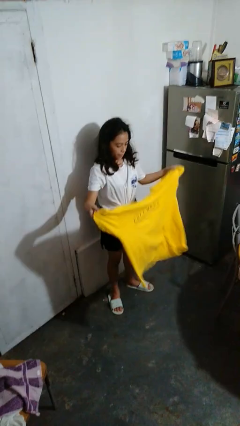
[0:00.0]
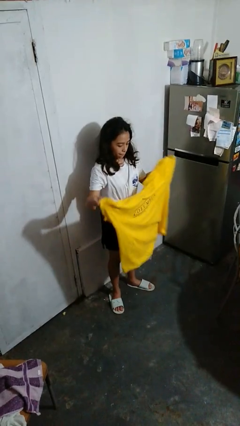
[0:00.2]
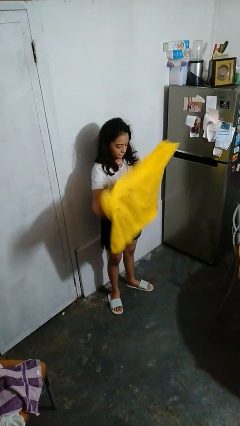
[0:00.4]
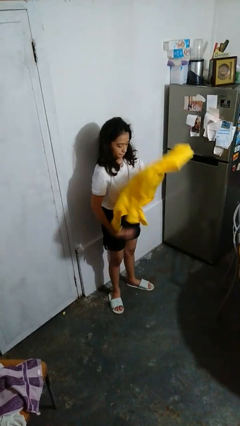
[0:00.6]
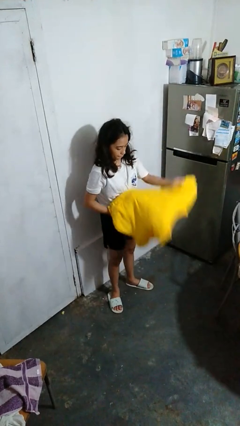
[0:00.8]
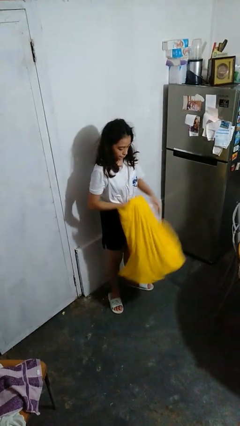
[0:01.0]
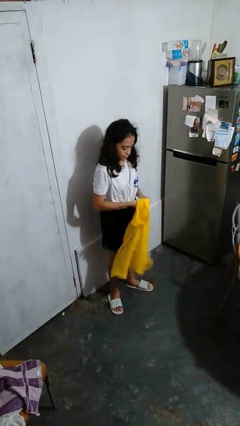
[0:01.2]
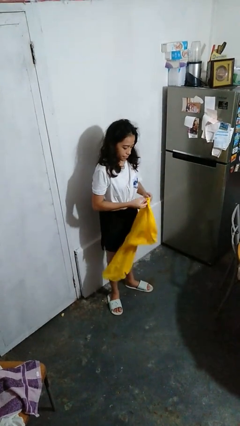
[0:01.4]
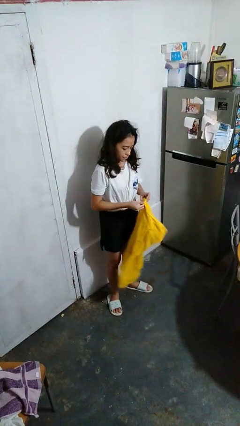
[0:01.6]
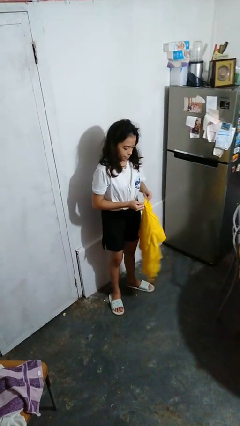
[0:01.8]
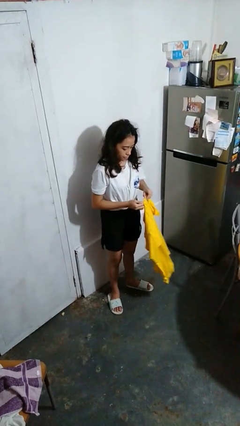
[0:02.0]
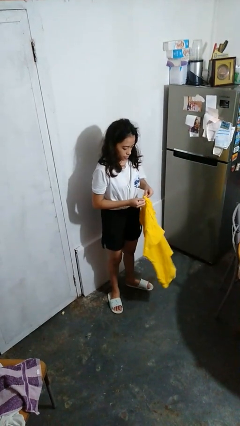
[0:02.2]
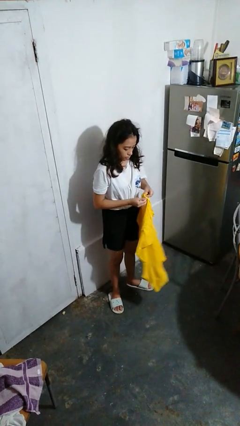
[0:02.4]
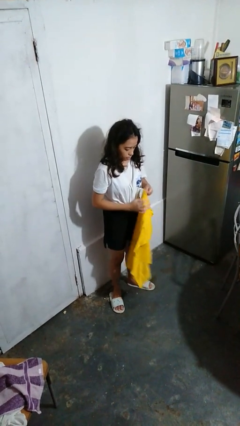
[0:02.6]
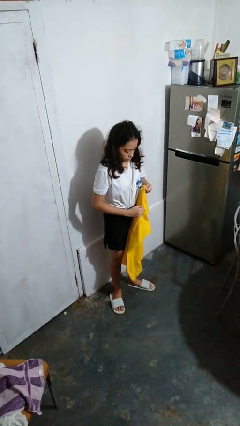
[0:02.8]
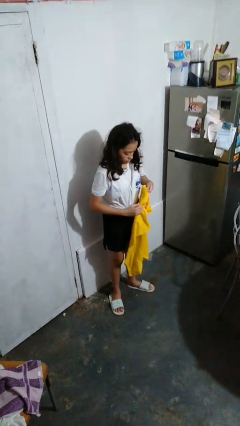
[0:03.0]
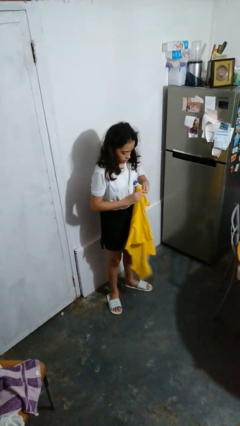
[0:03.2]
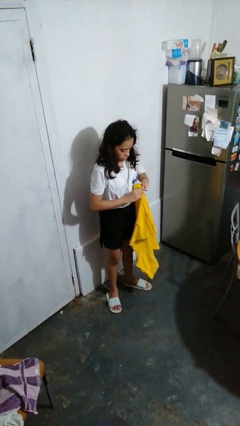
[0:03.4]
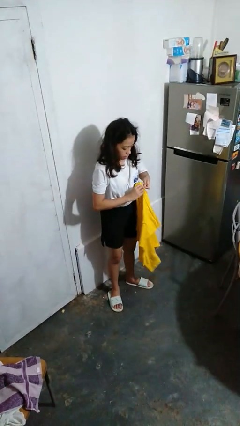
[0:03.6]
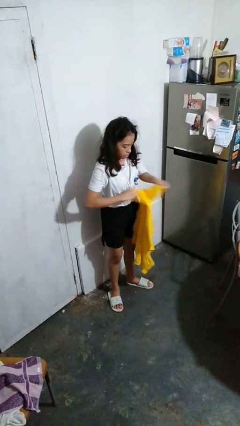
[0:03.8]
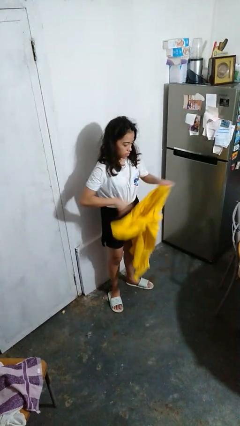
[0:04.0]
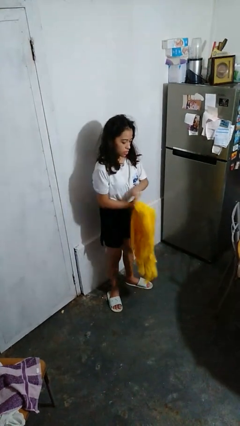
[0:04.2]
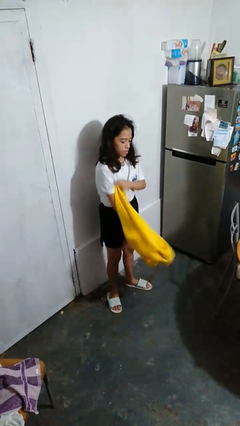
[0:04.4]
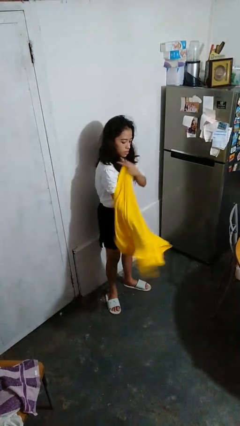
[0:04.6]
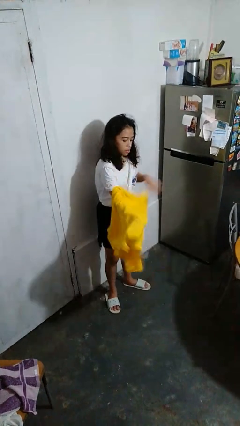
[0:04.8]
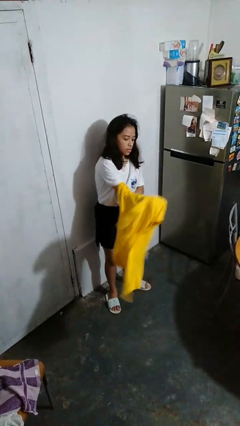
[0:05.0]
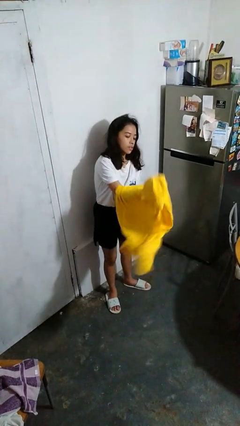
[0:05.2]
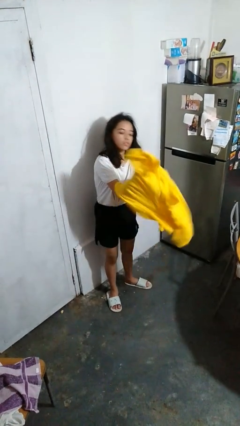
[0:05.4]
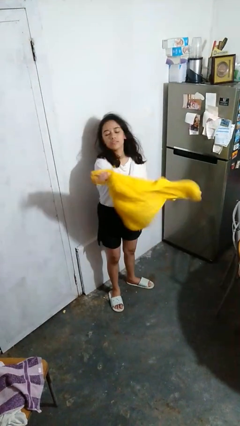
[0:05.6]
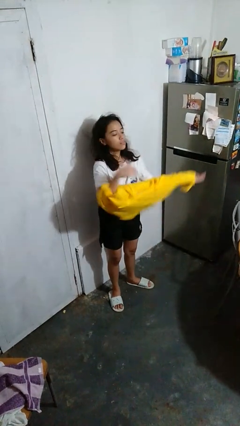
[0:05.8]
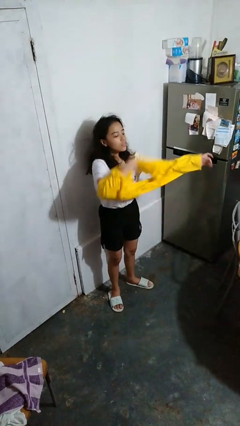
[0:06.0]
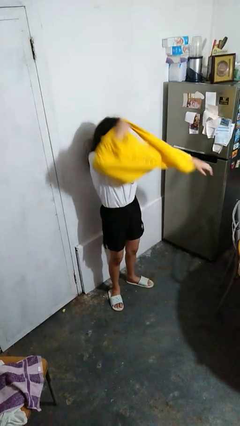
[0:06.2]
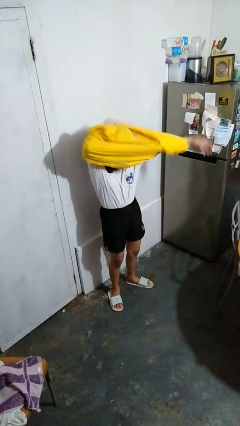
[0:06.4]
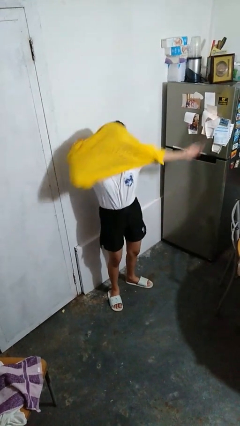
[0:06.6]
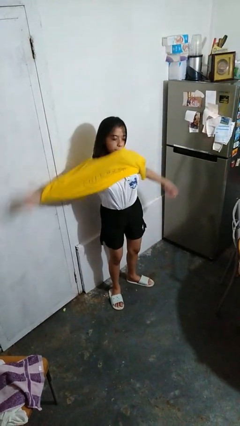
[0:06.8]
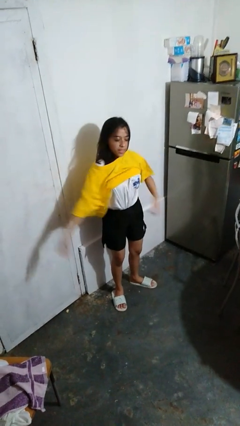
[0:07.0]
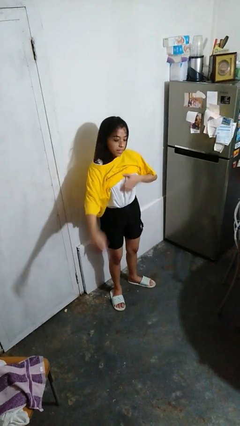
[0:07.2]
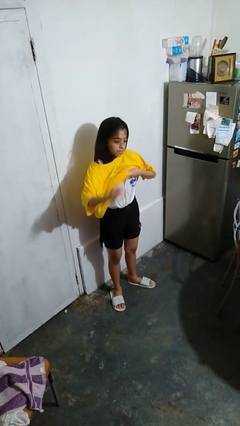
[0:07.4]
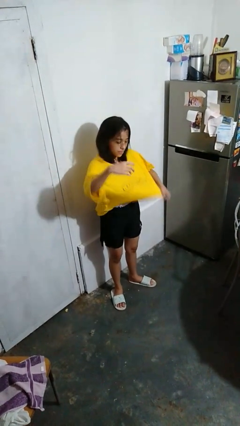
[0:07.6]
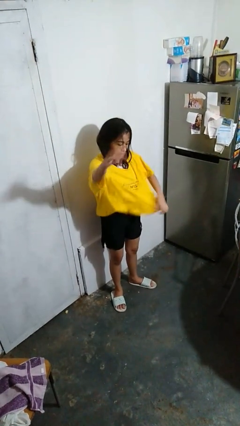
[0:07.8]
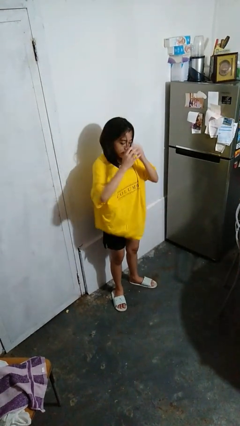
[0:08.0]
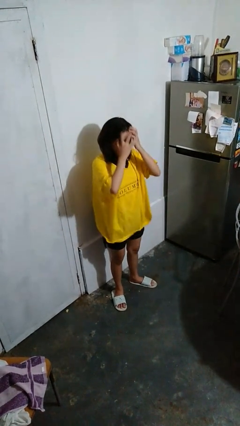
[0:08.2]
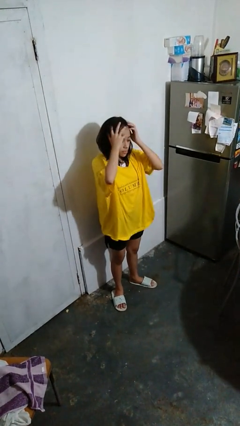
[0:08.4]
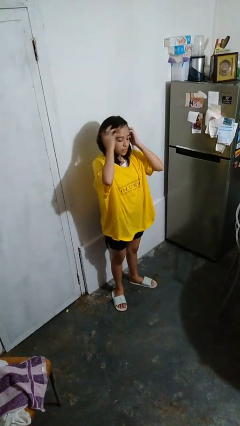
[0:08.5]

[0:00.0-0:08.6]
person puts on shirt

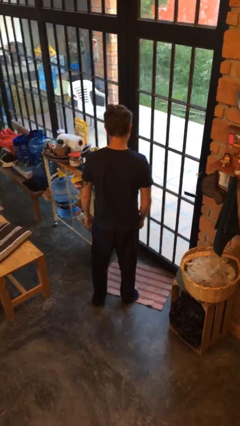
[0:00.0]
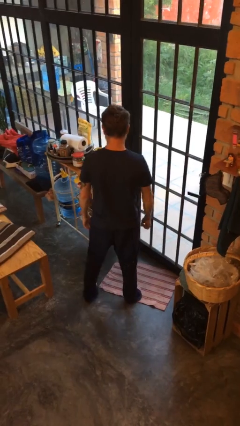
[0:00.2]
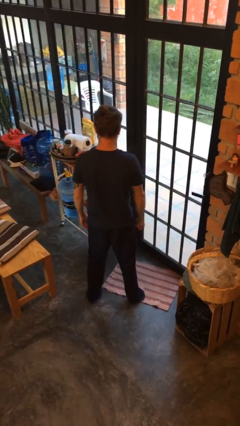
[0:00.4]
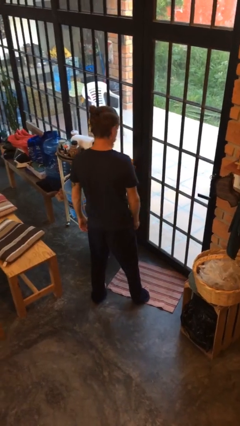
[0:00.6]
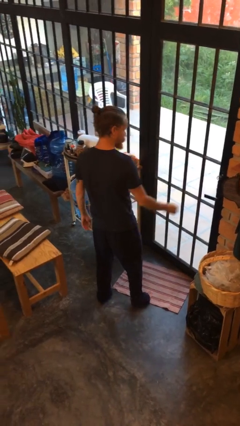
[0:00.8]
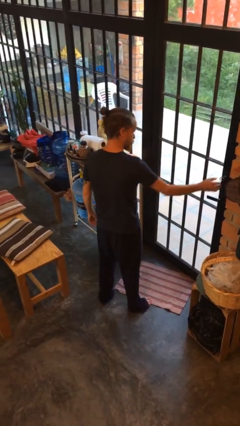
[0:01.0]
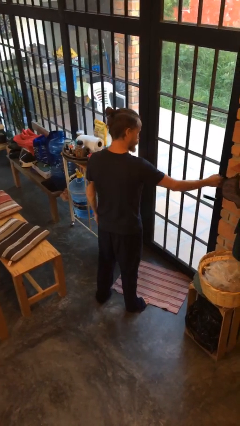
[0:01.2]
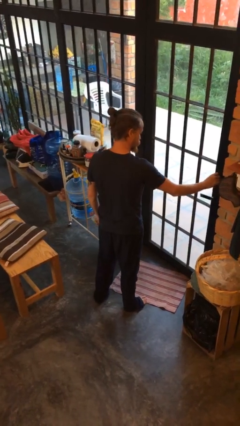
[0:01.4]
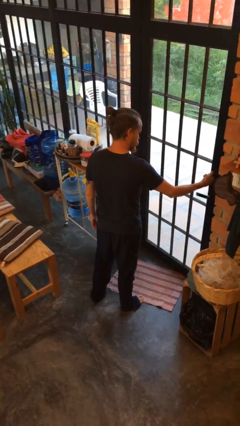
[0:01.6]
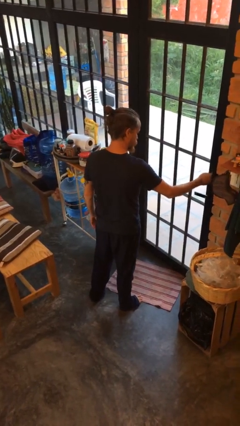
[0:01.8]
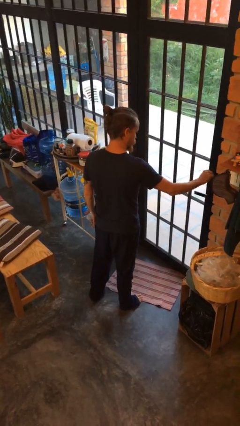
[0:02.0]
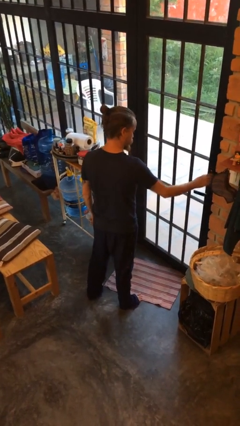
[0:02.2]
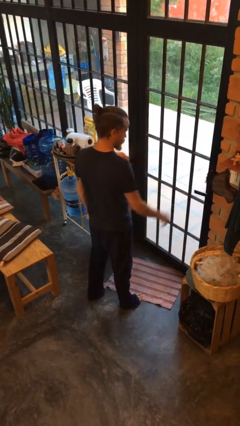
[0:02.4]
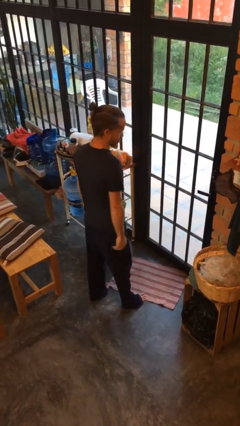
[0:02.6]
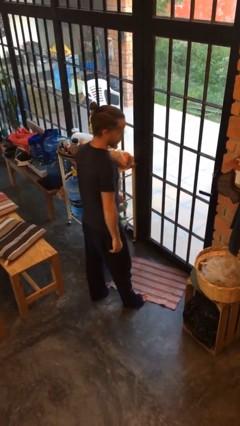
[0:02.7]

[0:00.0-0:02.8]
person unlocks door with keys

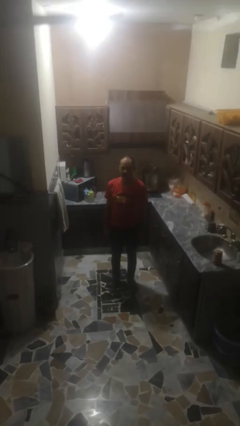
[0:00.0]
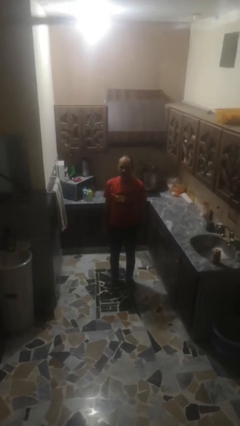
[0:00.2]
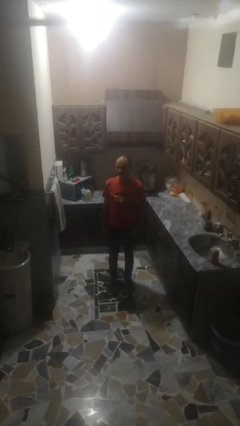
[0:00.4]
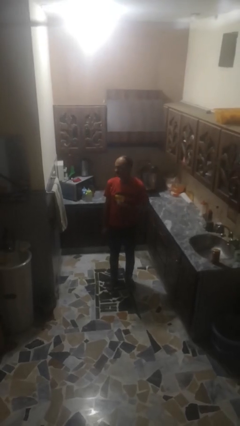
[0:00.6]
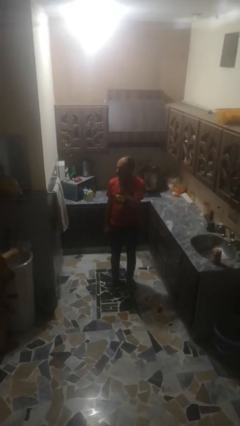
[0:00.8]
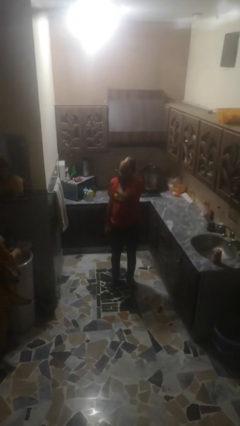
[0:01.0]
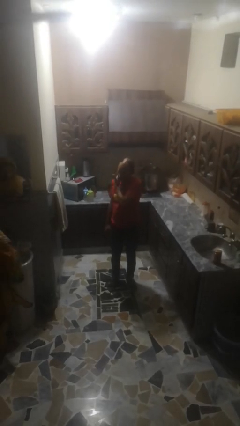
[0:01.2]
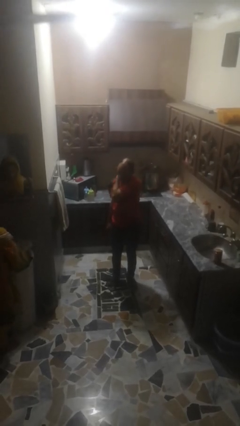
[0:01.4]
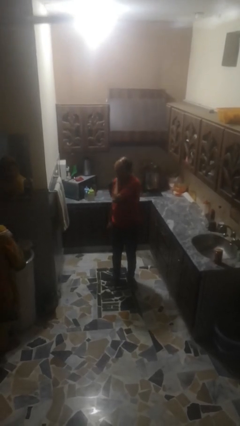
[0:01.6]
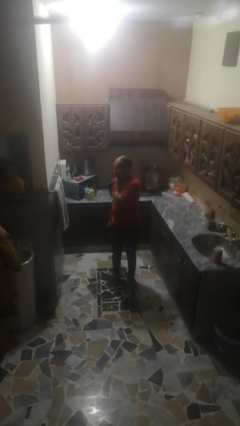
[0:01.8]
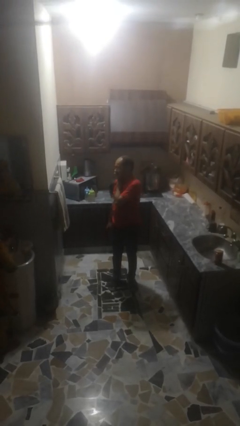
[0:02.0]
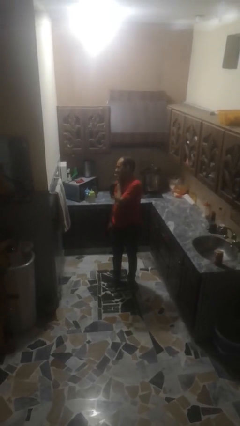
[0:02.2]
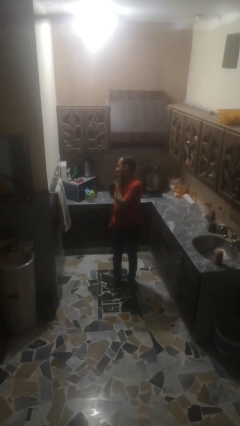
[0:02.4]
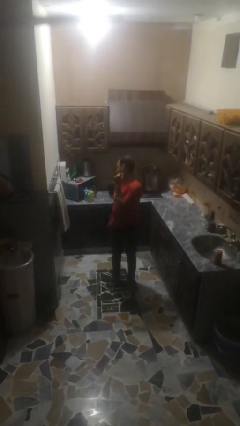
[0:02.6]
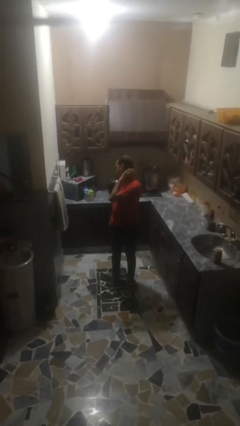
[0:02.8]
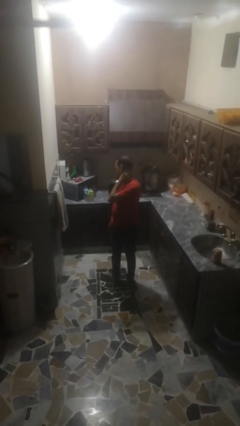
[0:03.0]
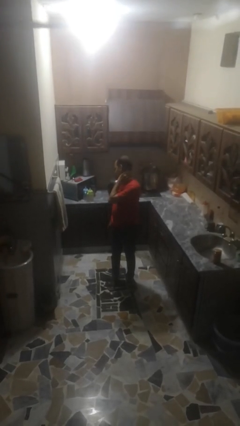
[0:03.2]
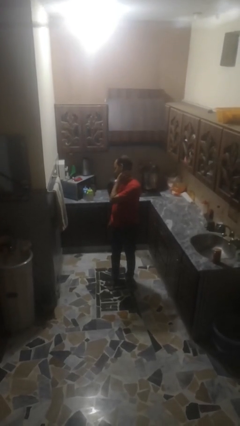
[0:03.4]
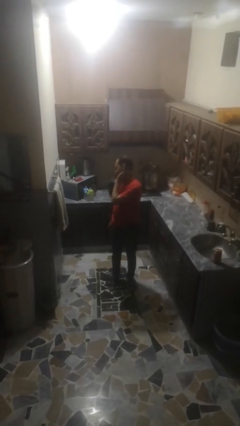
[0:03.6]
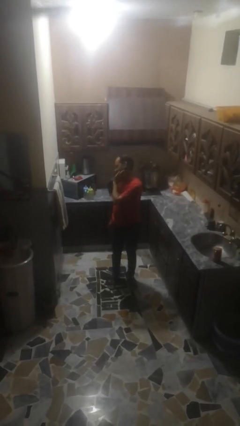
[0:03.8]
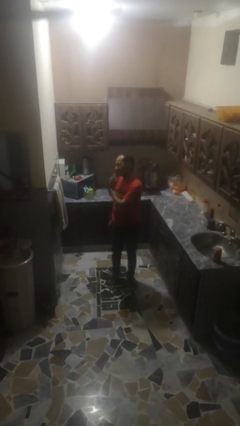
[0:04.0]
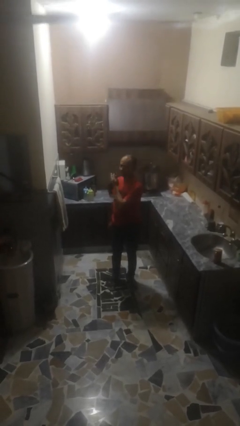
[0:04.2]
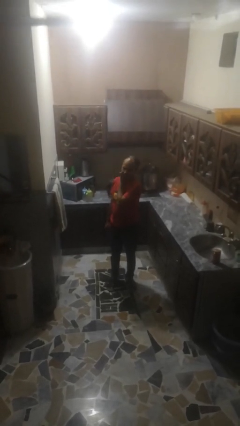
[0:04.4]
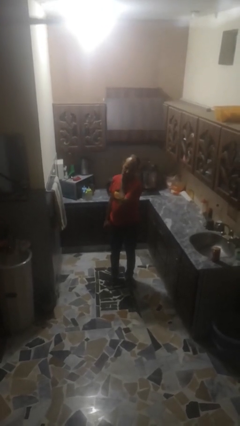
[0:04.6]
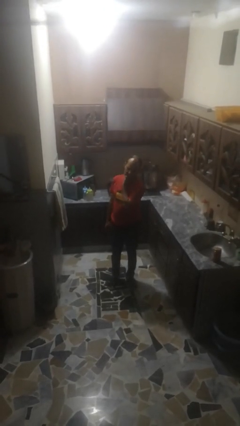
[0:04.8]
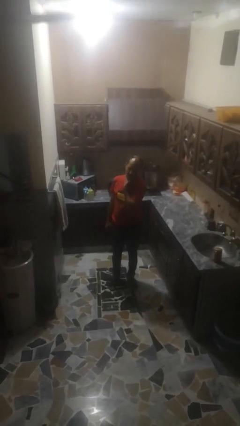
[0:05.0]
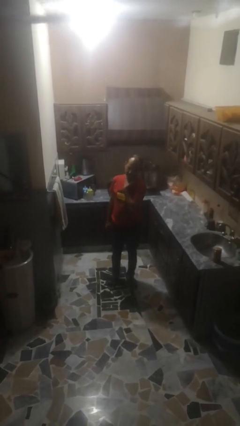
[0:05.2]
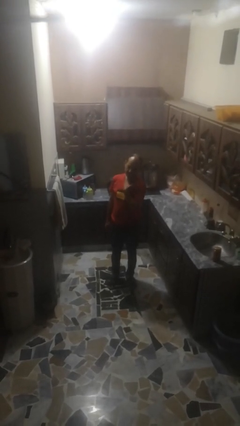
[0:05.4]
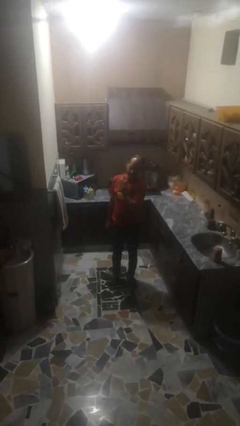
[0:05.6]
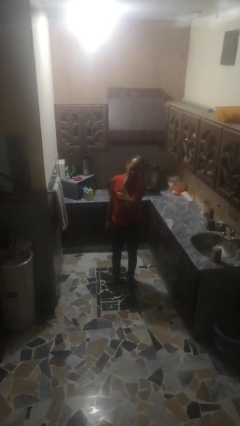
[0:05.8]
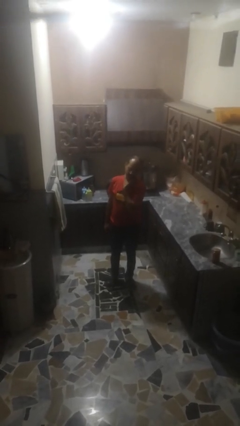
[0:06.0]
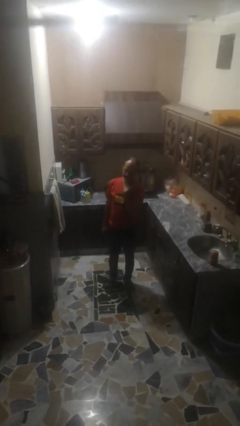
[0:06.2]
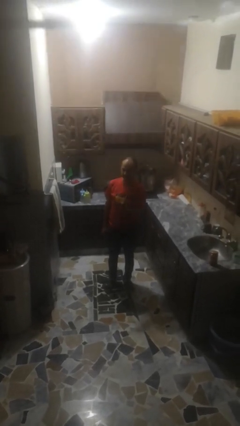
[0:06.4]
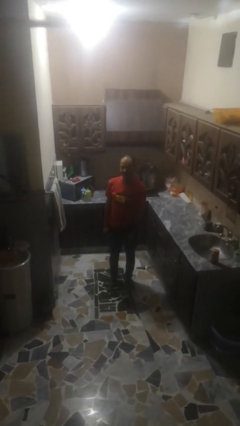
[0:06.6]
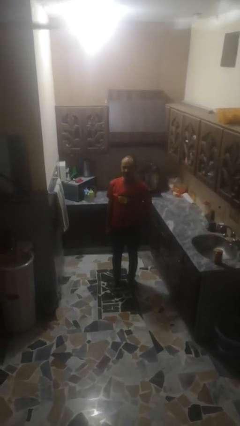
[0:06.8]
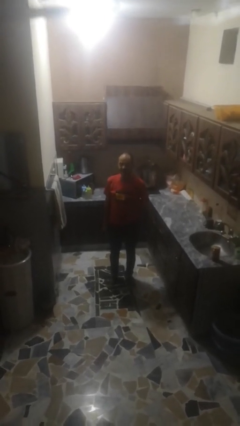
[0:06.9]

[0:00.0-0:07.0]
person rubs neck
